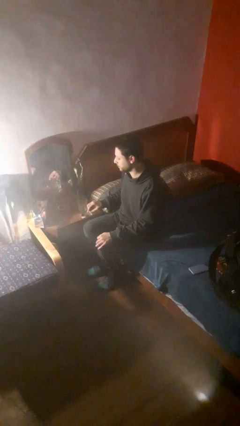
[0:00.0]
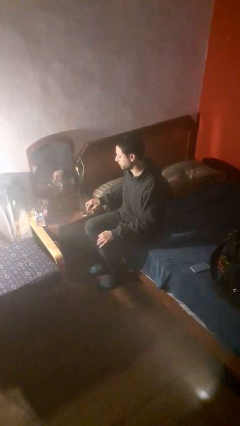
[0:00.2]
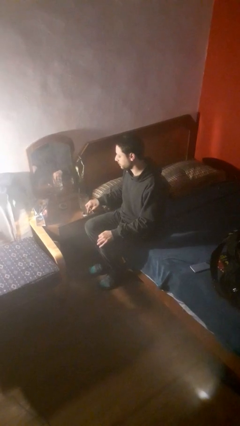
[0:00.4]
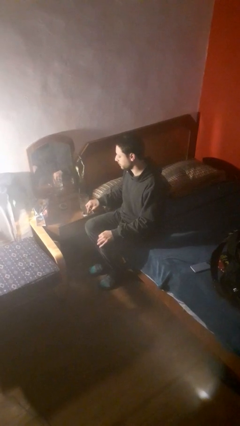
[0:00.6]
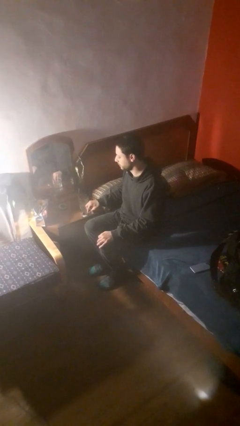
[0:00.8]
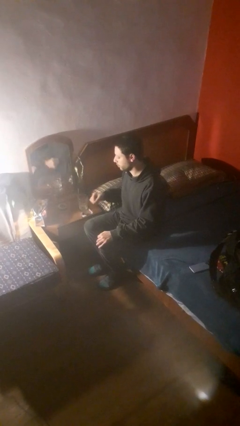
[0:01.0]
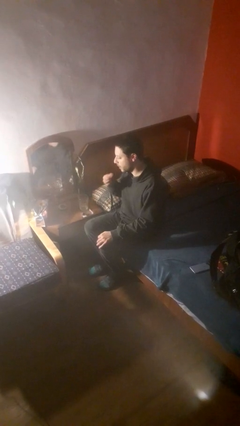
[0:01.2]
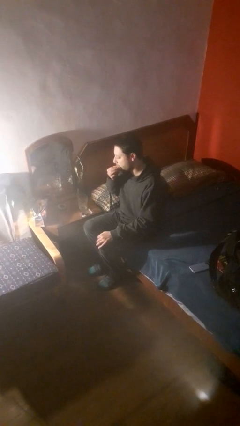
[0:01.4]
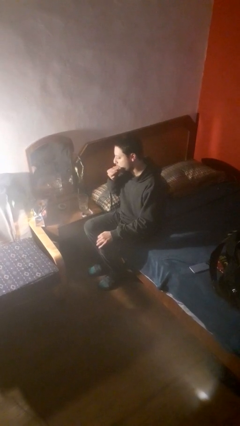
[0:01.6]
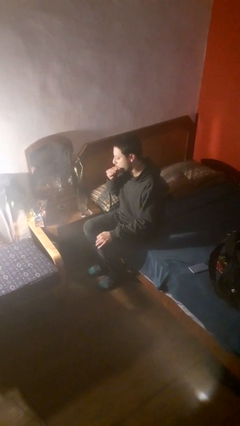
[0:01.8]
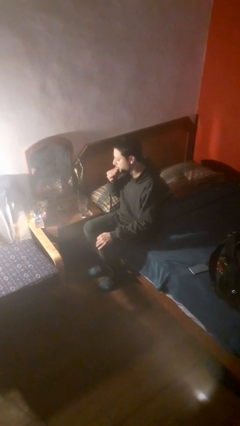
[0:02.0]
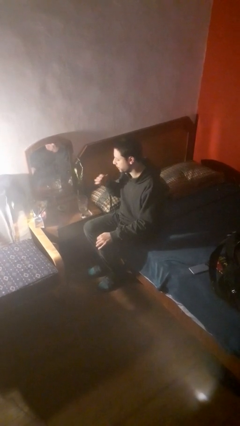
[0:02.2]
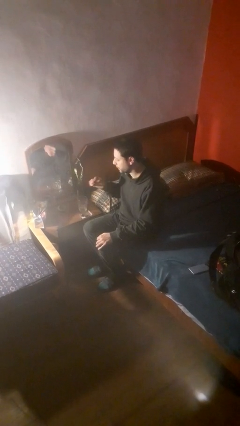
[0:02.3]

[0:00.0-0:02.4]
person takes medicine pills

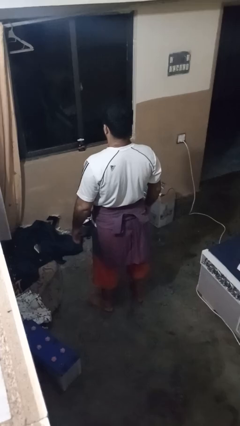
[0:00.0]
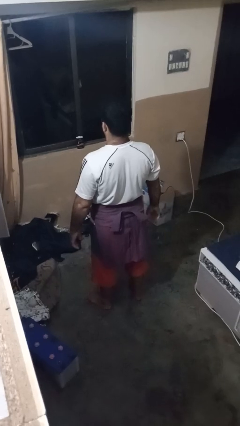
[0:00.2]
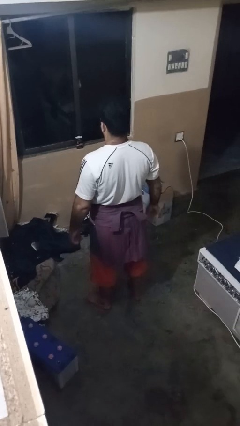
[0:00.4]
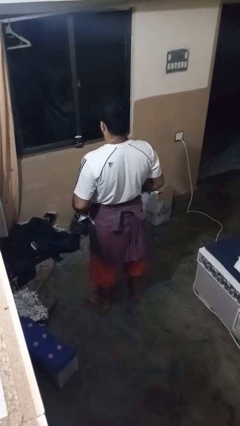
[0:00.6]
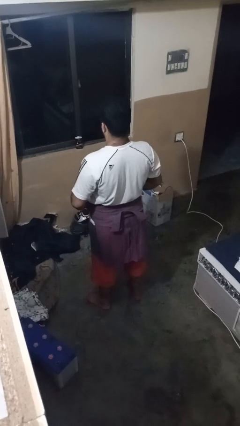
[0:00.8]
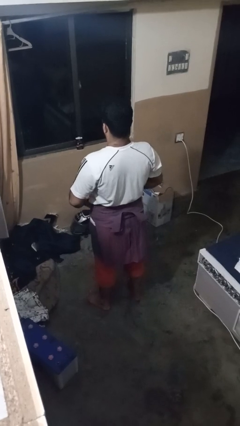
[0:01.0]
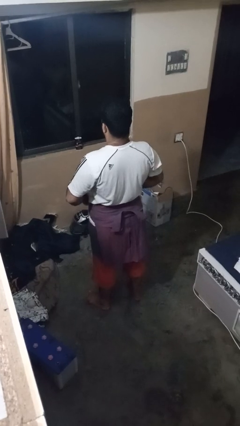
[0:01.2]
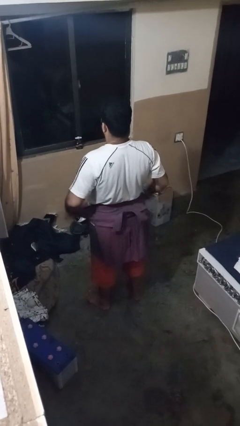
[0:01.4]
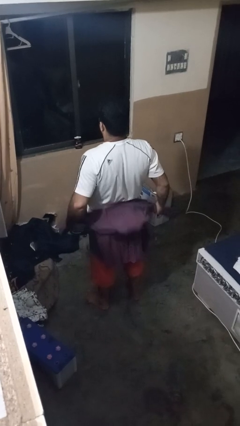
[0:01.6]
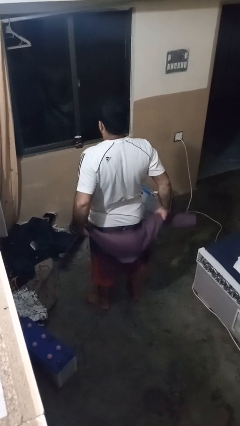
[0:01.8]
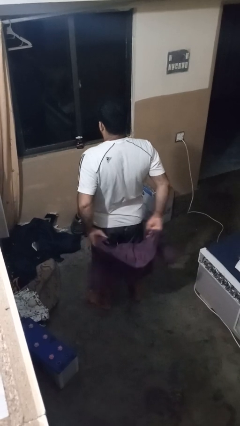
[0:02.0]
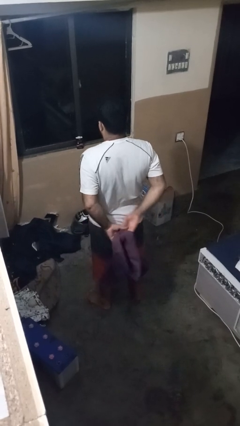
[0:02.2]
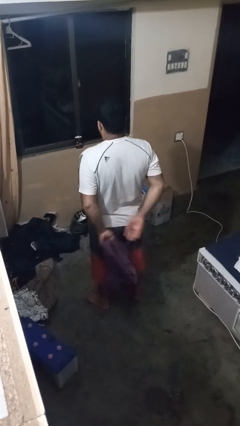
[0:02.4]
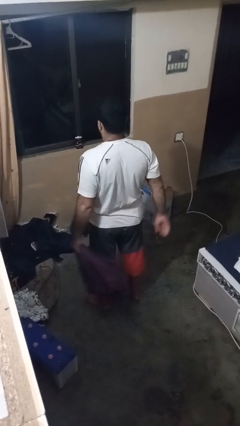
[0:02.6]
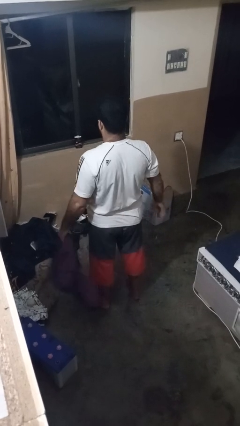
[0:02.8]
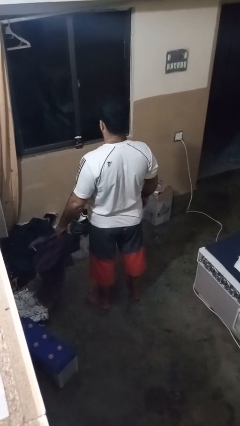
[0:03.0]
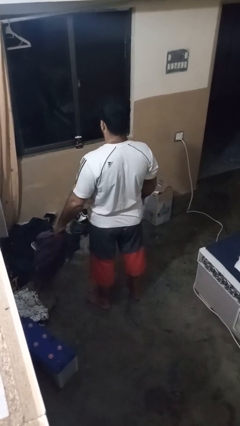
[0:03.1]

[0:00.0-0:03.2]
person unties jacket around waist

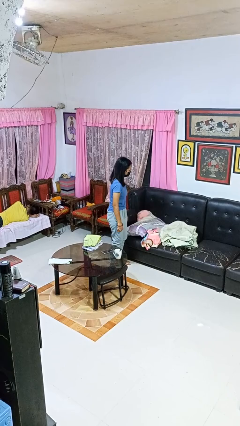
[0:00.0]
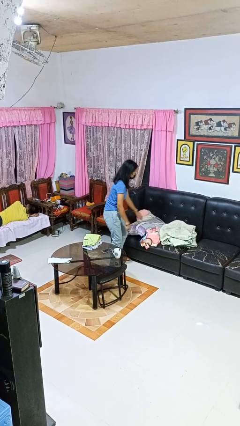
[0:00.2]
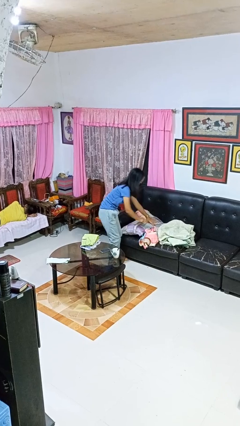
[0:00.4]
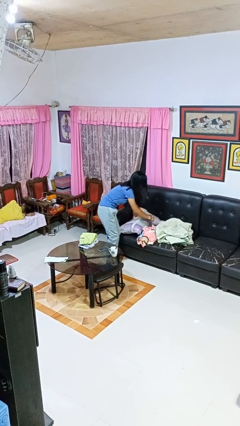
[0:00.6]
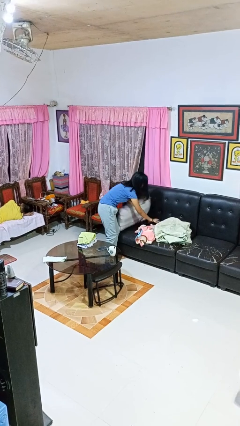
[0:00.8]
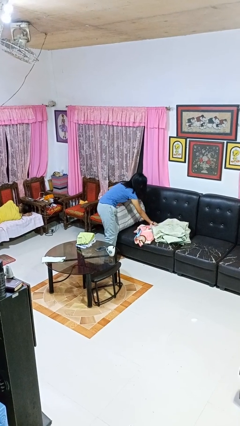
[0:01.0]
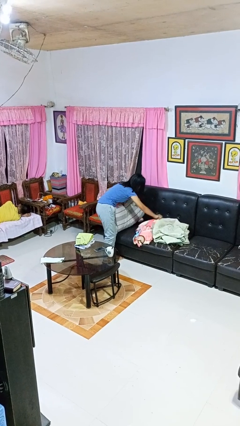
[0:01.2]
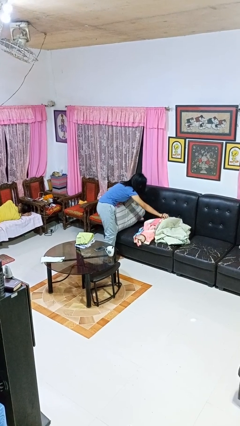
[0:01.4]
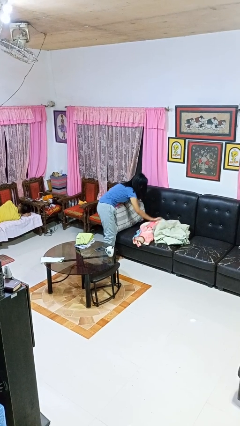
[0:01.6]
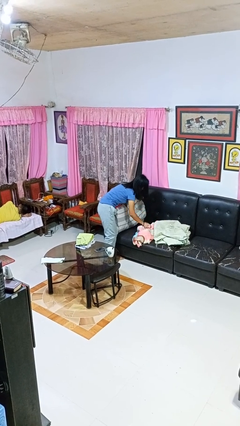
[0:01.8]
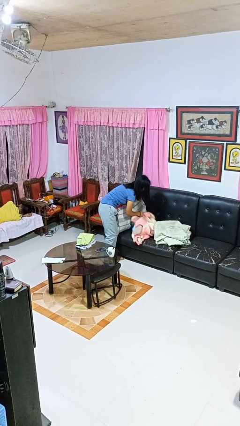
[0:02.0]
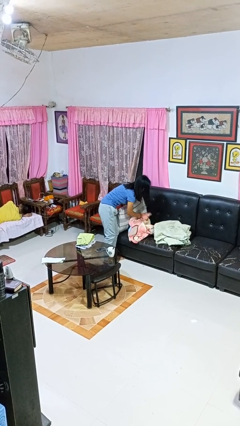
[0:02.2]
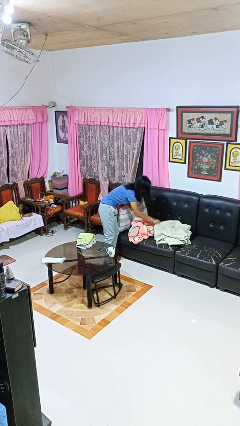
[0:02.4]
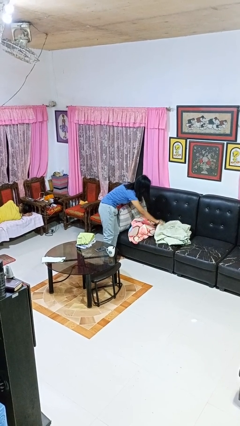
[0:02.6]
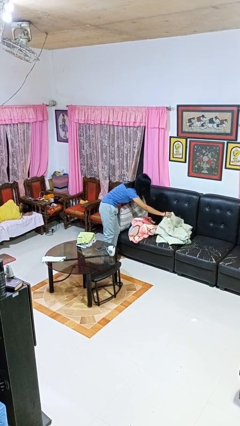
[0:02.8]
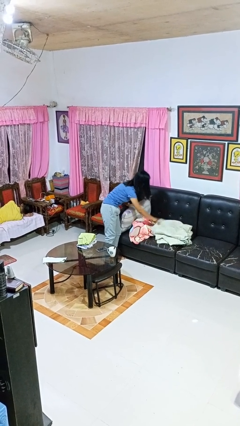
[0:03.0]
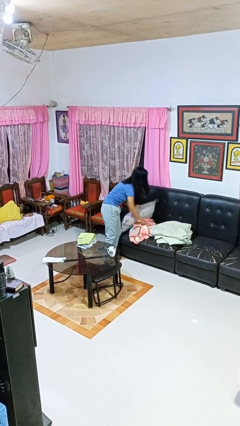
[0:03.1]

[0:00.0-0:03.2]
person searches in couch

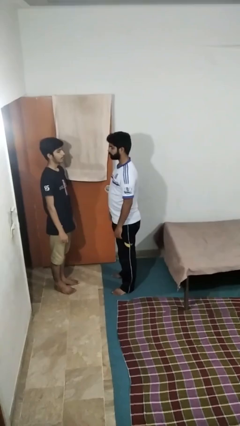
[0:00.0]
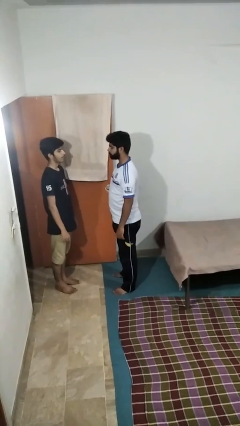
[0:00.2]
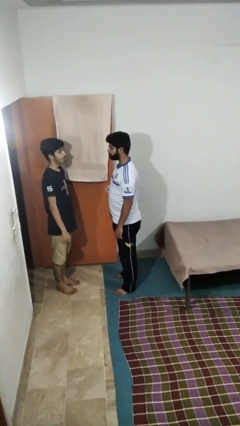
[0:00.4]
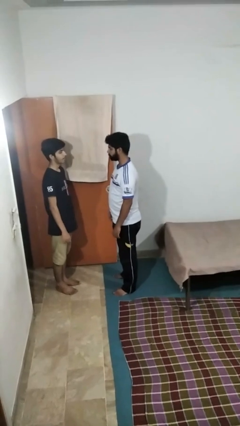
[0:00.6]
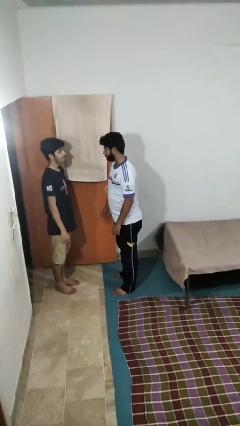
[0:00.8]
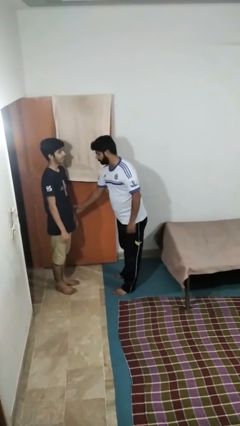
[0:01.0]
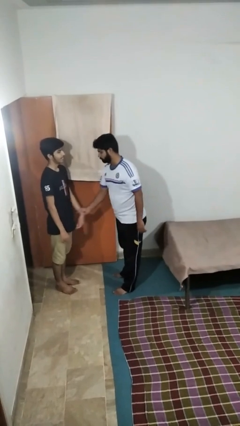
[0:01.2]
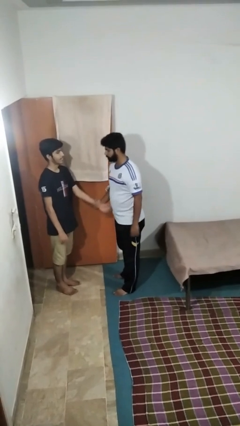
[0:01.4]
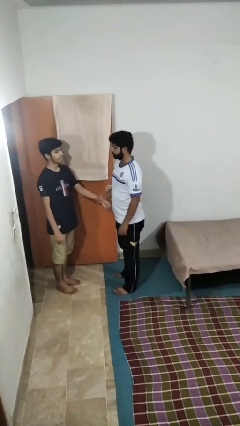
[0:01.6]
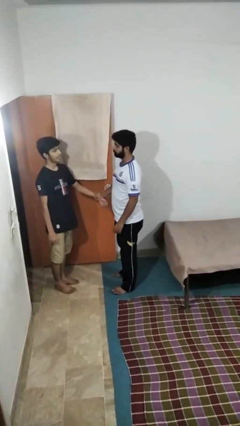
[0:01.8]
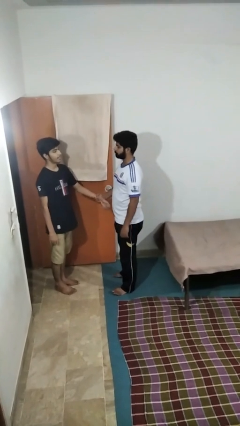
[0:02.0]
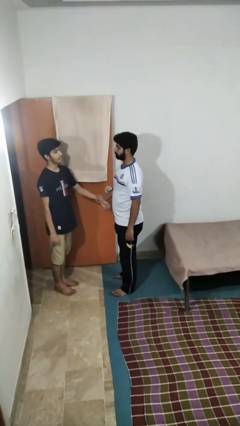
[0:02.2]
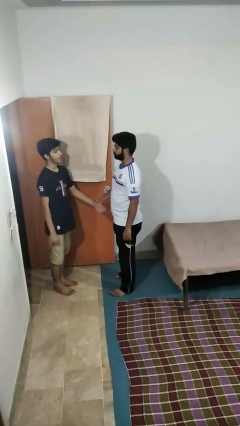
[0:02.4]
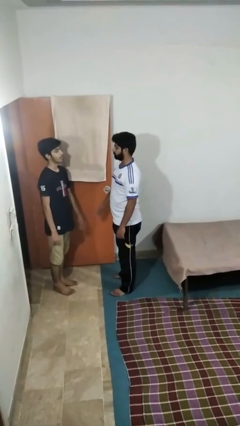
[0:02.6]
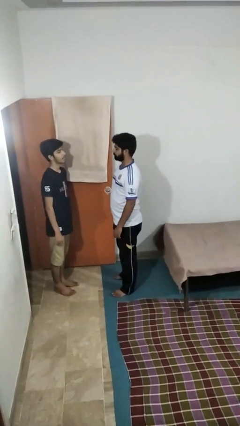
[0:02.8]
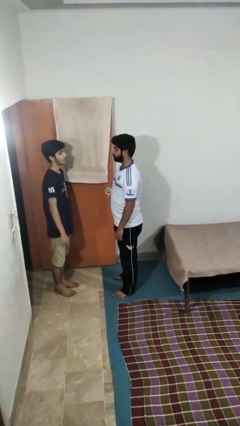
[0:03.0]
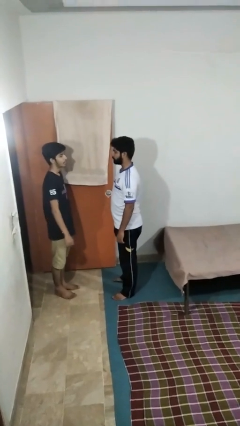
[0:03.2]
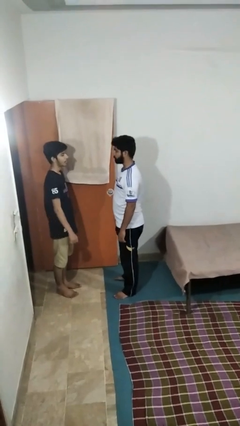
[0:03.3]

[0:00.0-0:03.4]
person grabs person by forearm

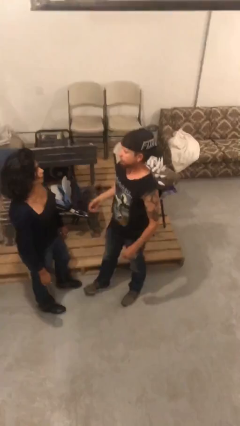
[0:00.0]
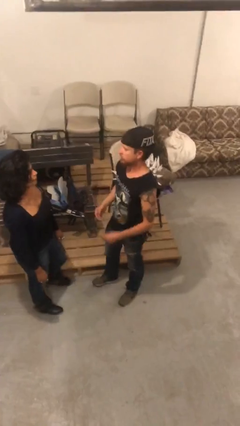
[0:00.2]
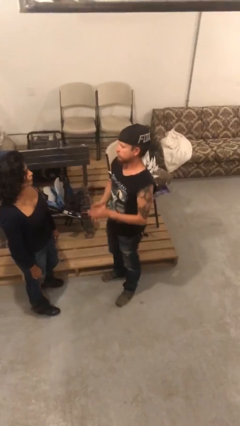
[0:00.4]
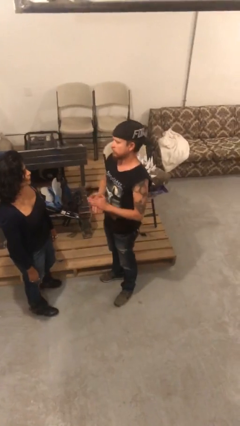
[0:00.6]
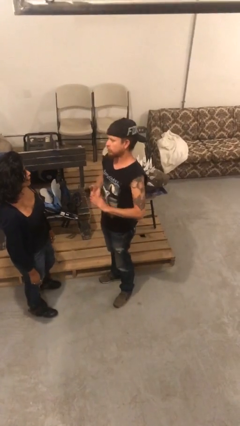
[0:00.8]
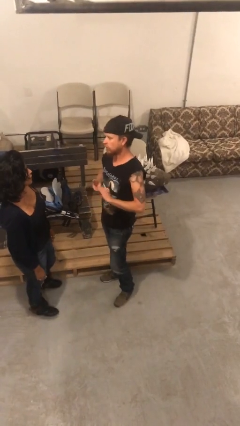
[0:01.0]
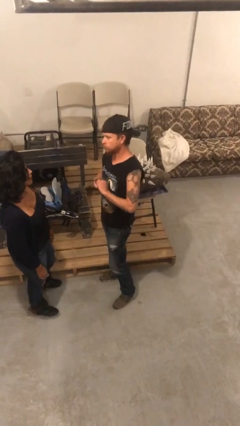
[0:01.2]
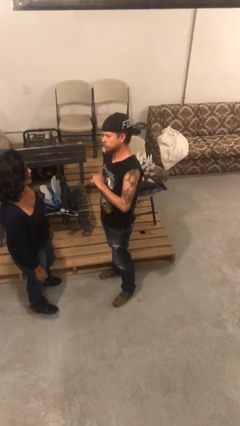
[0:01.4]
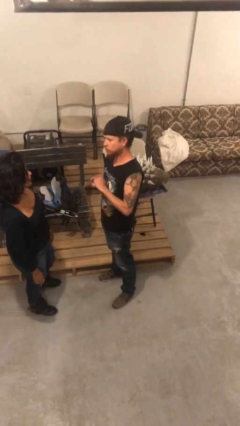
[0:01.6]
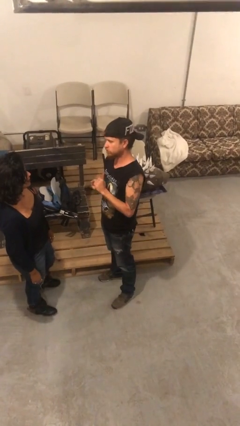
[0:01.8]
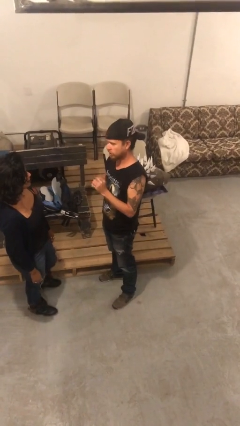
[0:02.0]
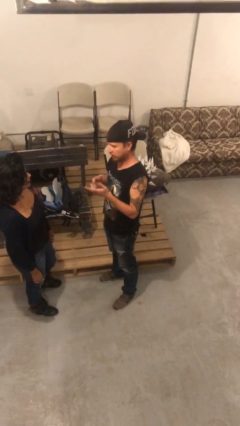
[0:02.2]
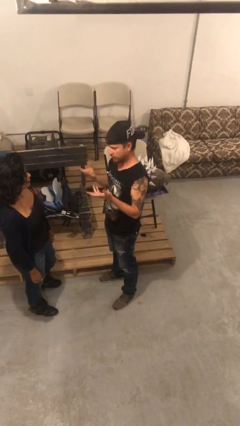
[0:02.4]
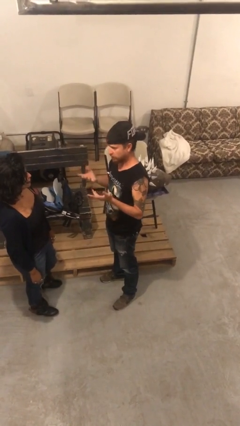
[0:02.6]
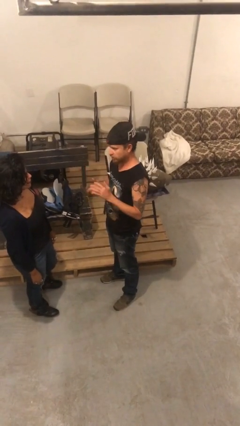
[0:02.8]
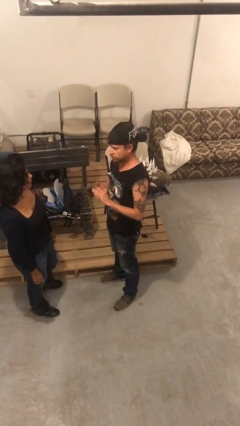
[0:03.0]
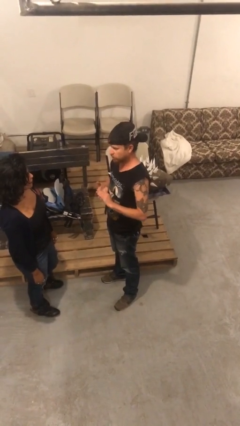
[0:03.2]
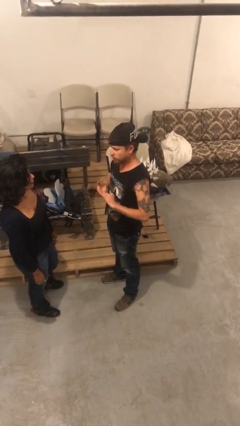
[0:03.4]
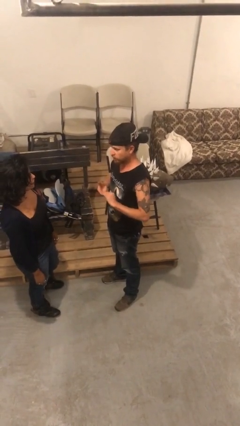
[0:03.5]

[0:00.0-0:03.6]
person talks to person

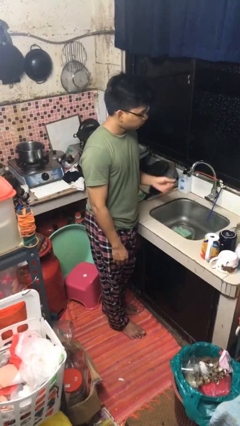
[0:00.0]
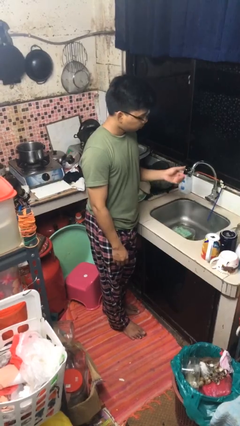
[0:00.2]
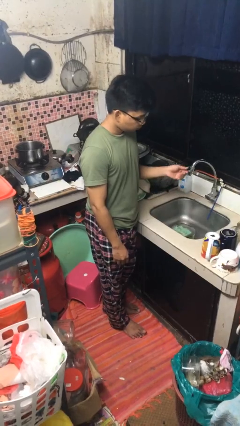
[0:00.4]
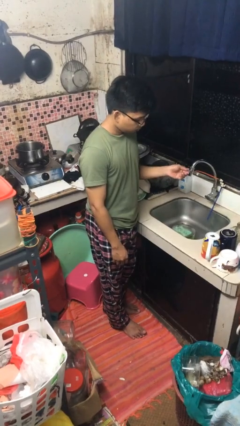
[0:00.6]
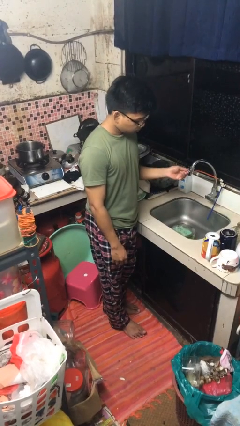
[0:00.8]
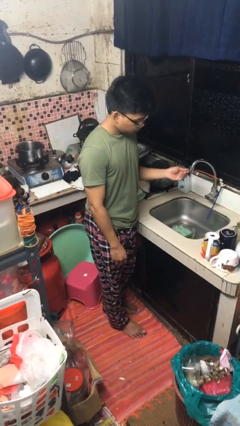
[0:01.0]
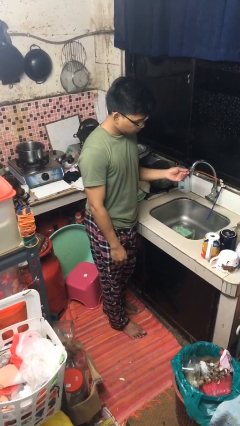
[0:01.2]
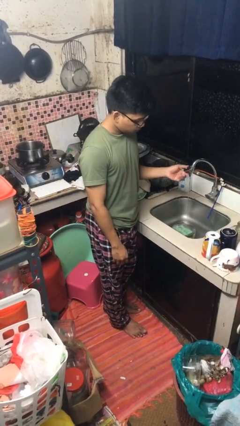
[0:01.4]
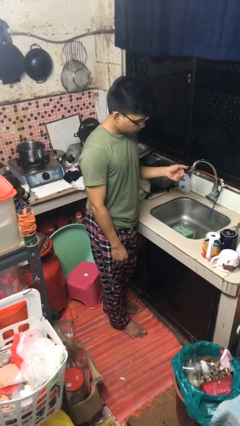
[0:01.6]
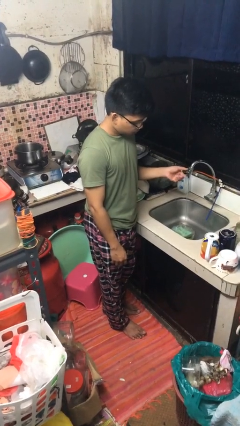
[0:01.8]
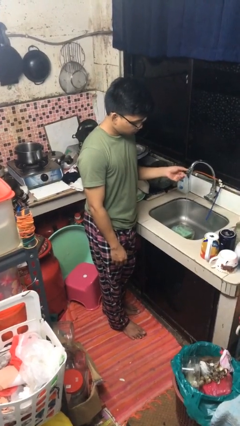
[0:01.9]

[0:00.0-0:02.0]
person turns on faucet
